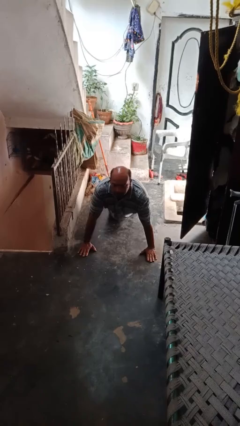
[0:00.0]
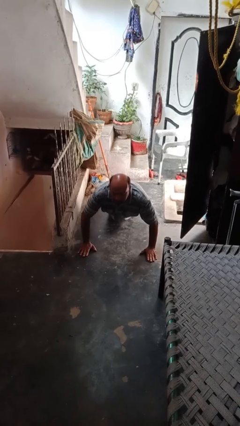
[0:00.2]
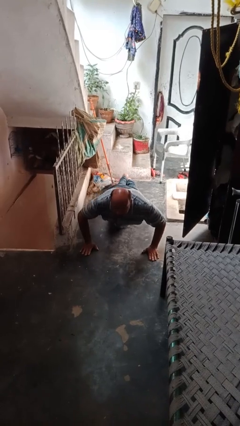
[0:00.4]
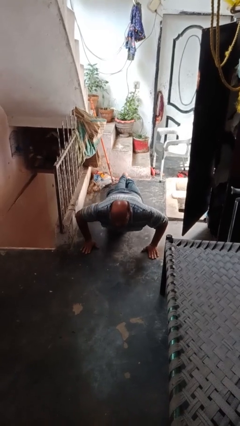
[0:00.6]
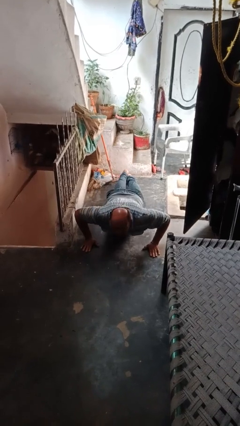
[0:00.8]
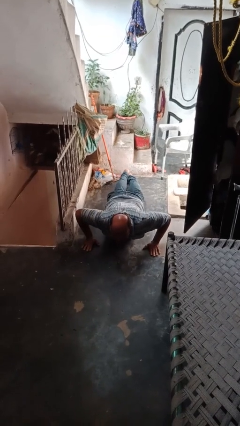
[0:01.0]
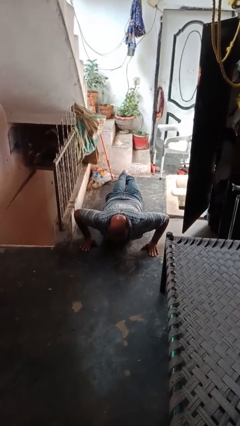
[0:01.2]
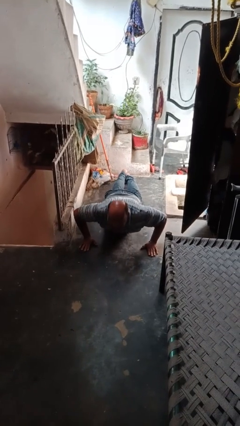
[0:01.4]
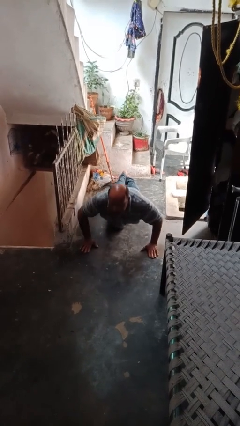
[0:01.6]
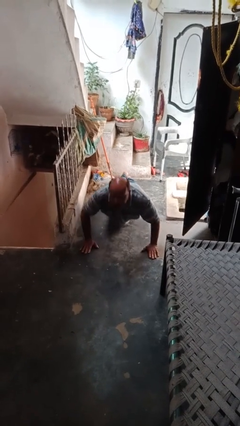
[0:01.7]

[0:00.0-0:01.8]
person exercises with pushup

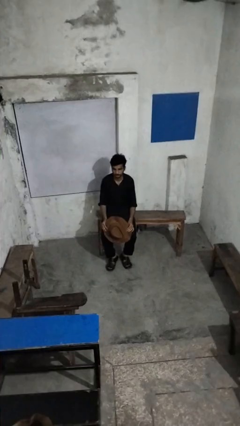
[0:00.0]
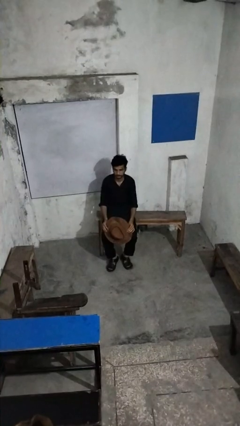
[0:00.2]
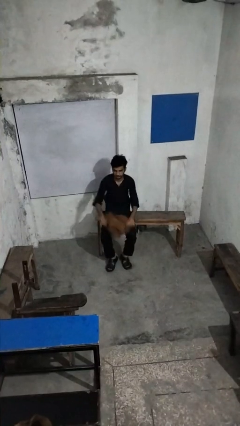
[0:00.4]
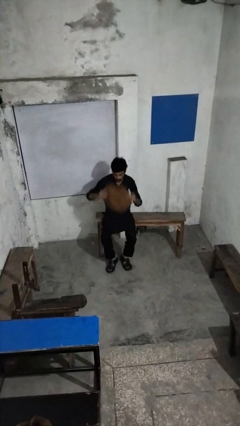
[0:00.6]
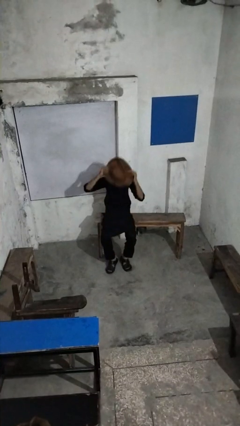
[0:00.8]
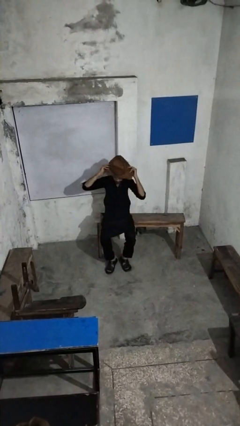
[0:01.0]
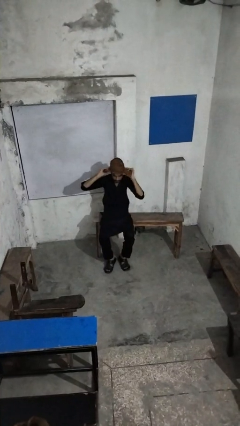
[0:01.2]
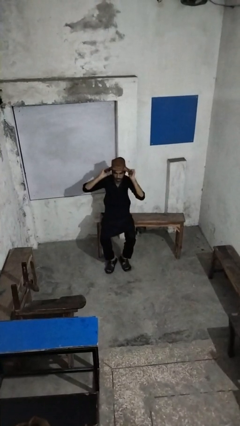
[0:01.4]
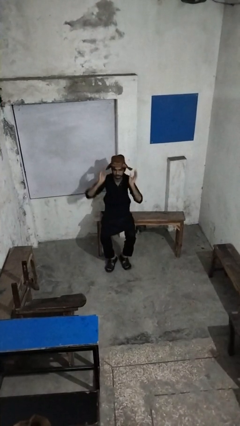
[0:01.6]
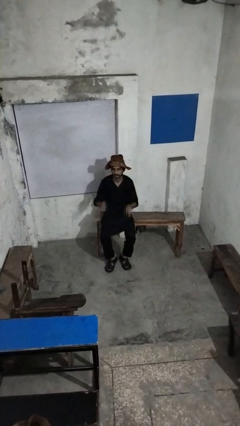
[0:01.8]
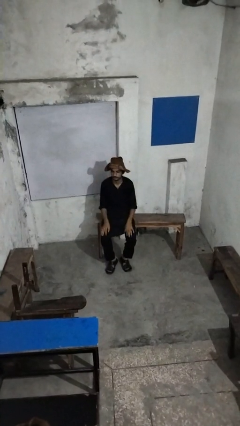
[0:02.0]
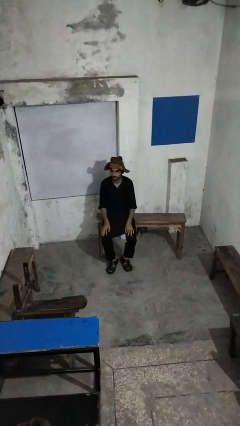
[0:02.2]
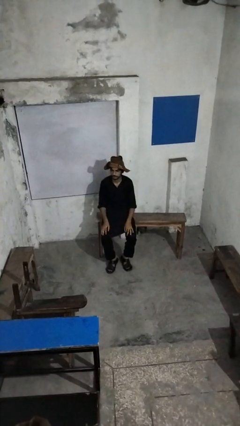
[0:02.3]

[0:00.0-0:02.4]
person puts on hat

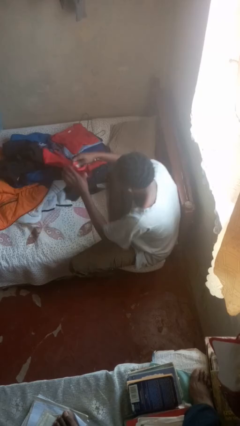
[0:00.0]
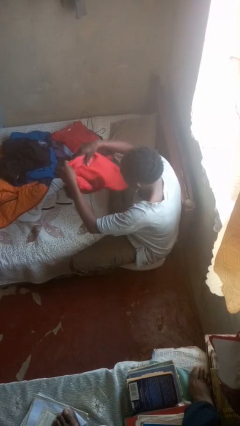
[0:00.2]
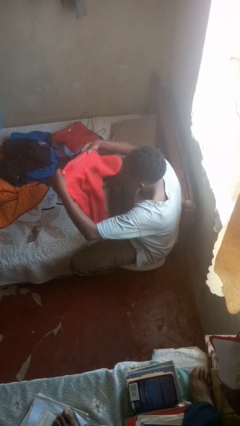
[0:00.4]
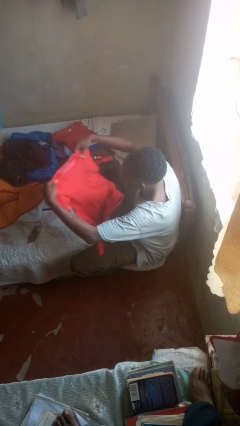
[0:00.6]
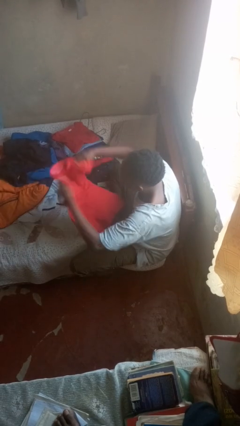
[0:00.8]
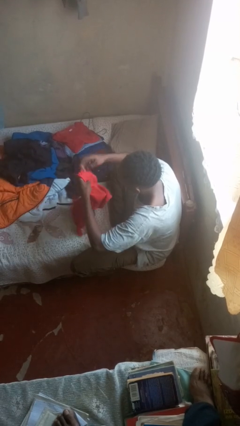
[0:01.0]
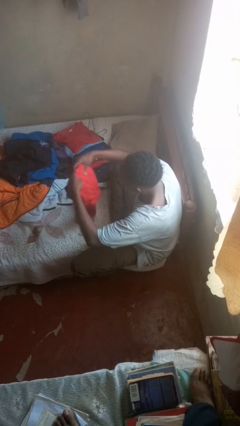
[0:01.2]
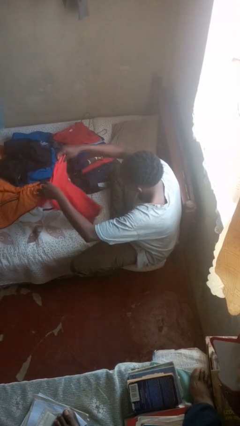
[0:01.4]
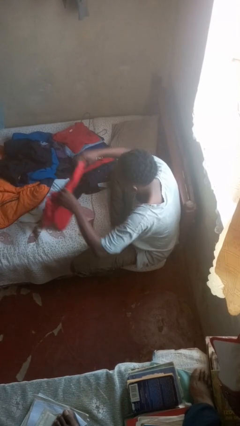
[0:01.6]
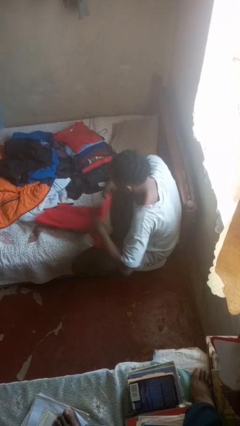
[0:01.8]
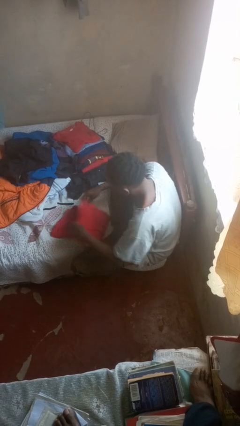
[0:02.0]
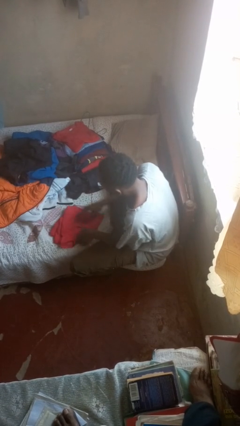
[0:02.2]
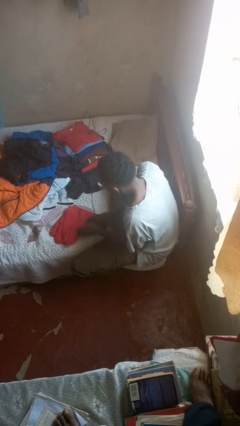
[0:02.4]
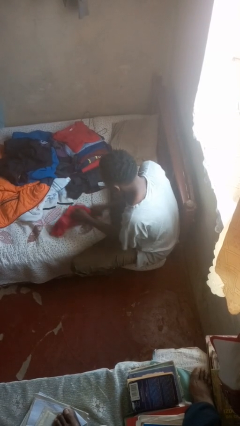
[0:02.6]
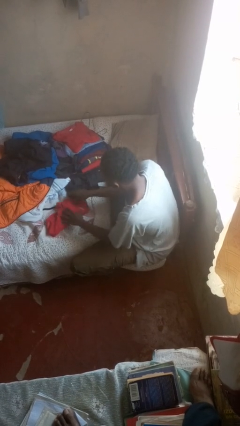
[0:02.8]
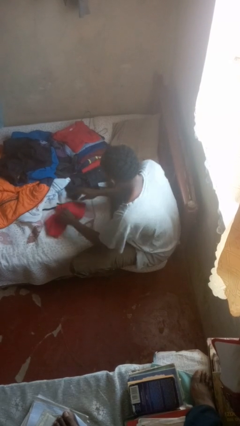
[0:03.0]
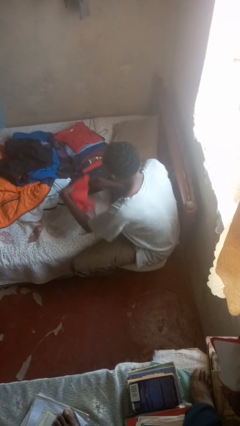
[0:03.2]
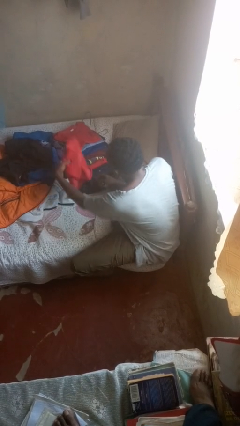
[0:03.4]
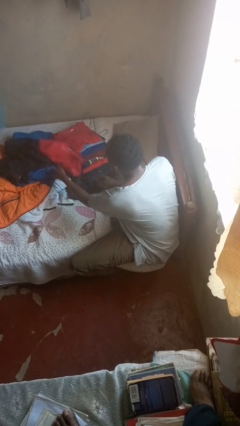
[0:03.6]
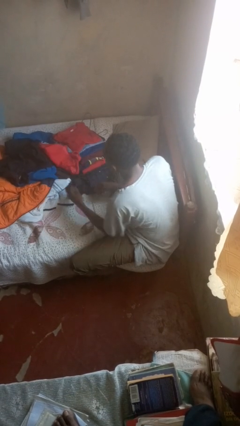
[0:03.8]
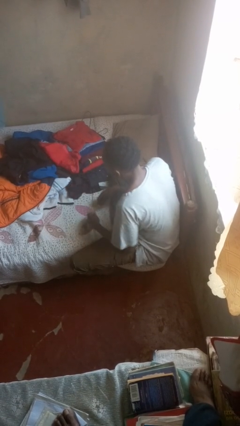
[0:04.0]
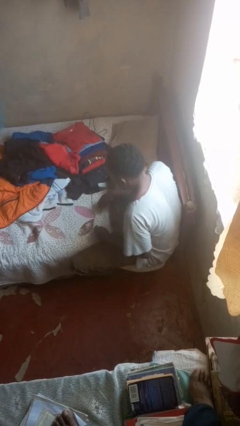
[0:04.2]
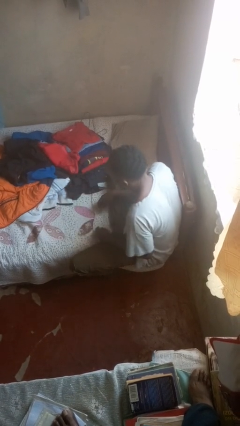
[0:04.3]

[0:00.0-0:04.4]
person folds shirt

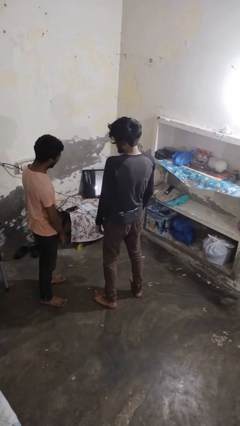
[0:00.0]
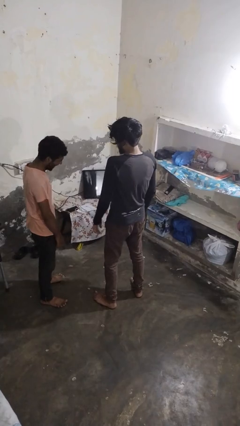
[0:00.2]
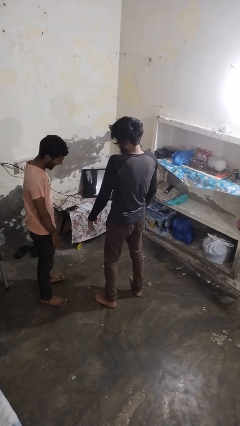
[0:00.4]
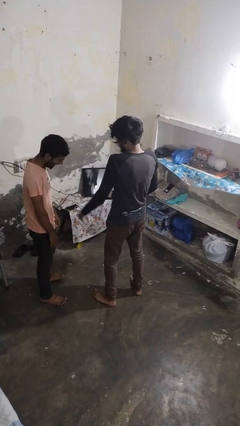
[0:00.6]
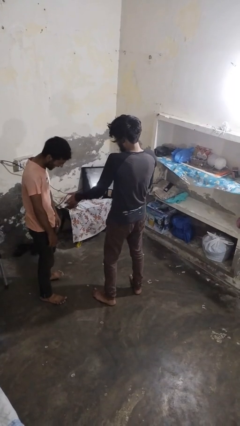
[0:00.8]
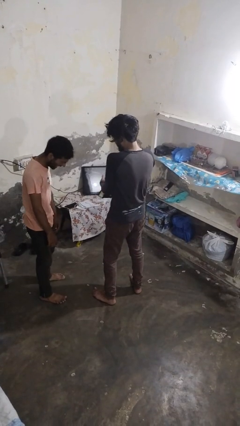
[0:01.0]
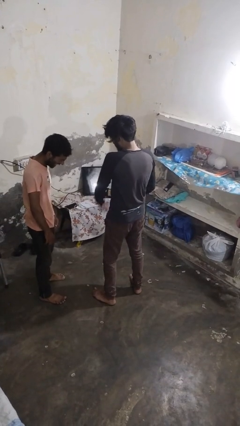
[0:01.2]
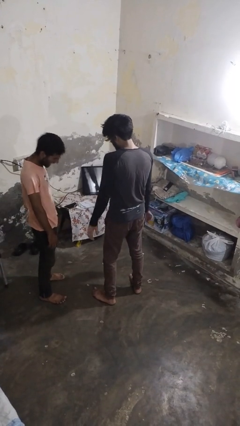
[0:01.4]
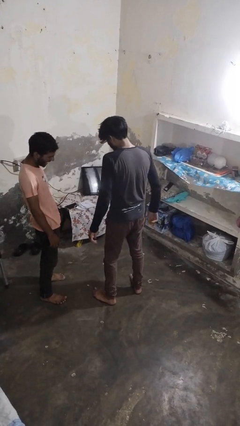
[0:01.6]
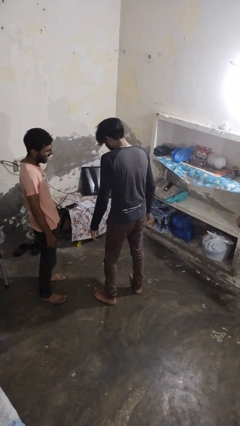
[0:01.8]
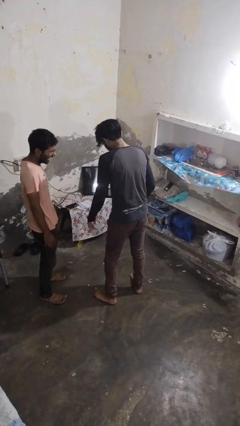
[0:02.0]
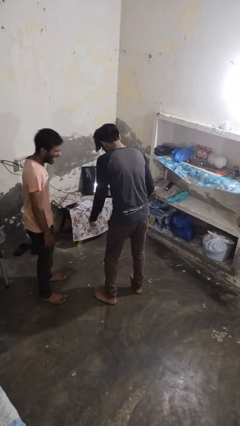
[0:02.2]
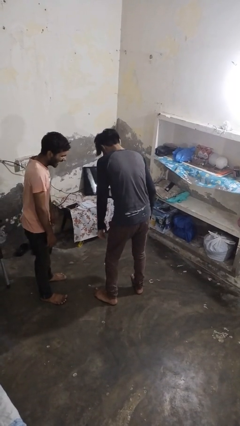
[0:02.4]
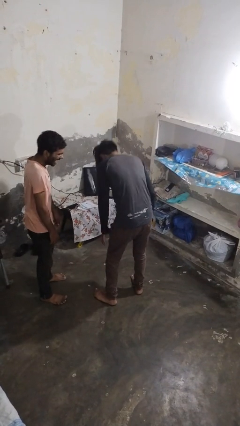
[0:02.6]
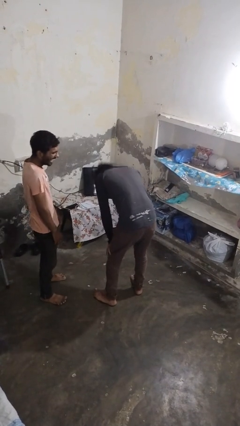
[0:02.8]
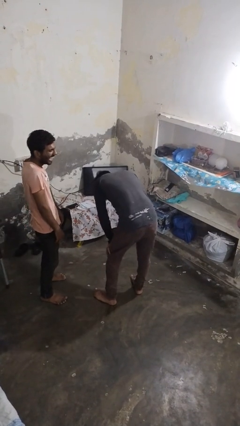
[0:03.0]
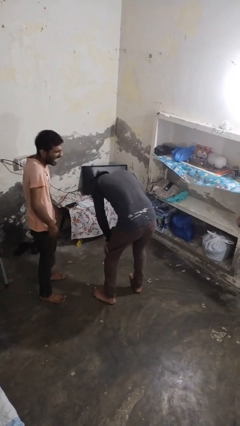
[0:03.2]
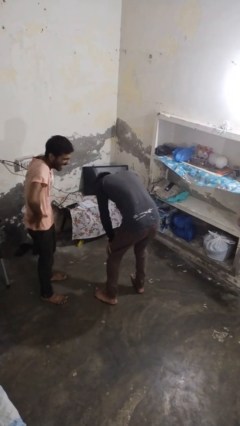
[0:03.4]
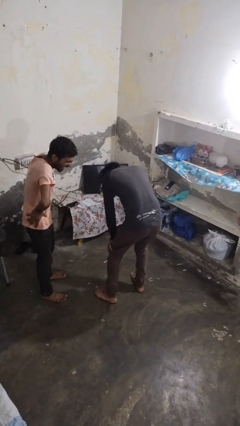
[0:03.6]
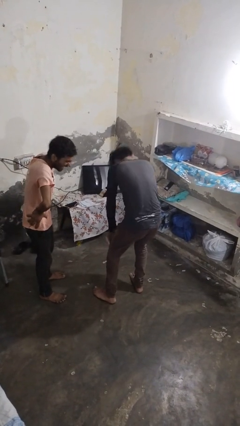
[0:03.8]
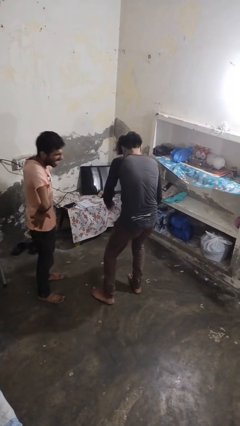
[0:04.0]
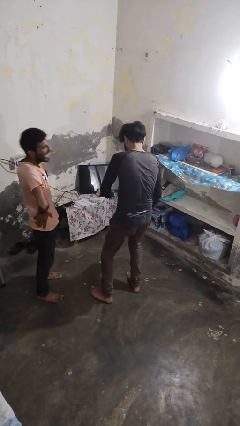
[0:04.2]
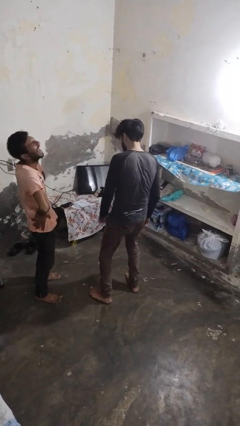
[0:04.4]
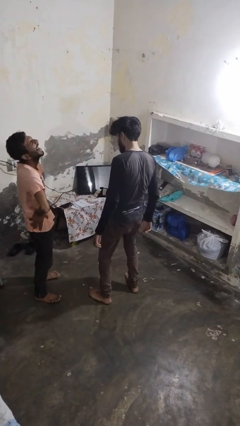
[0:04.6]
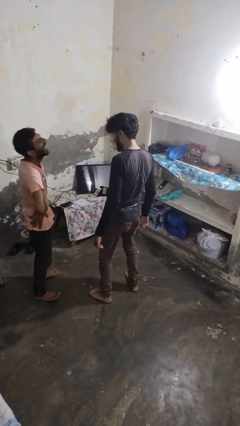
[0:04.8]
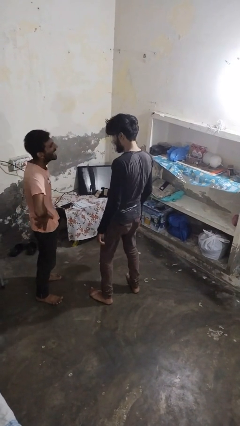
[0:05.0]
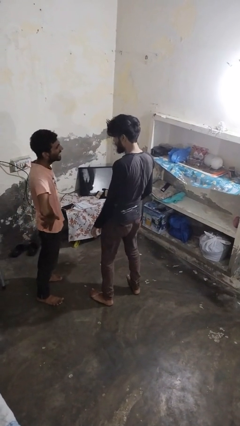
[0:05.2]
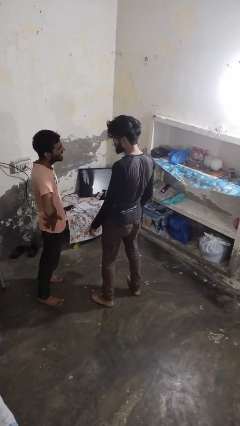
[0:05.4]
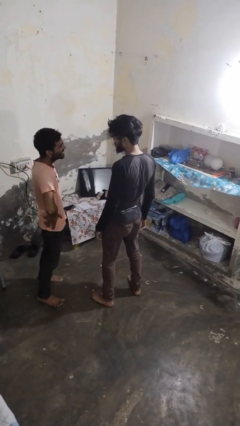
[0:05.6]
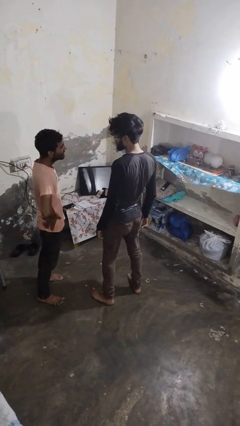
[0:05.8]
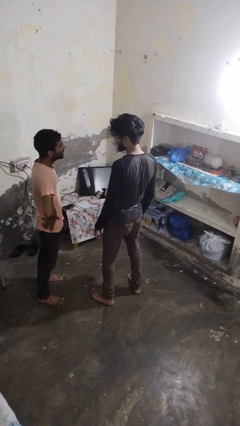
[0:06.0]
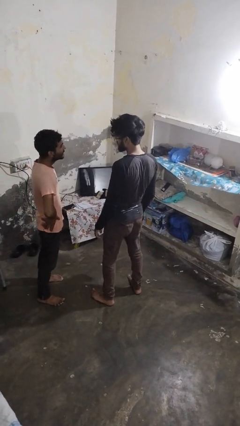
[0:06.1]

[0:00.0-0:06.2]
person laughs with person

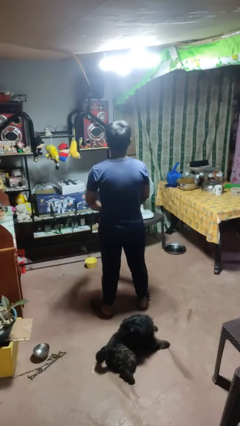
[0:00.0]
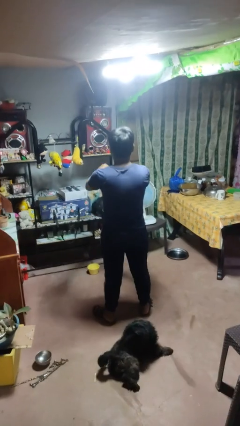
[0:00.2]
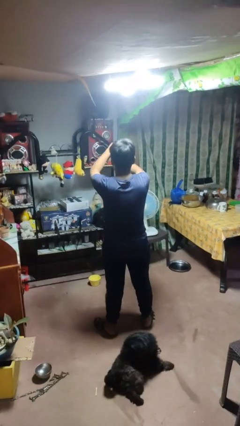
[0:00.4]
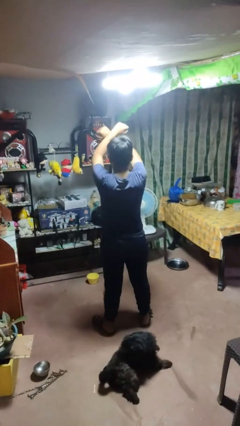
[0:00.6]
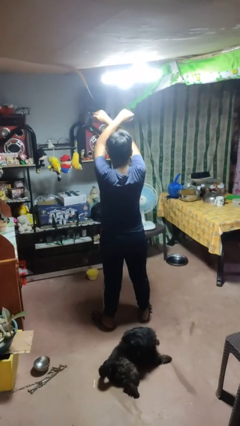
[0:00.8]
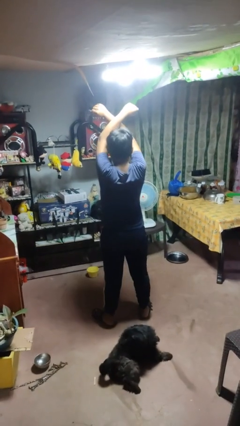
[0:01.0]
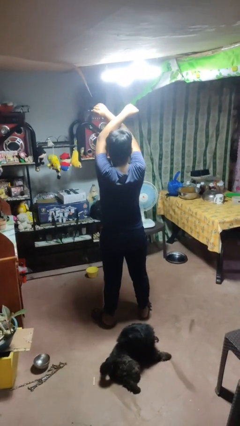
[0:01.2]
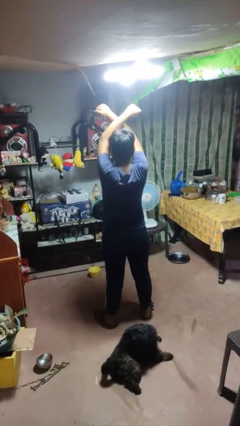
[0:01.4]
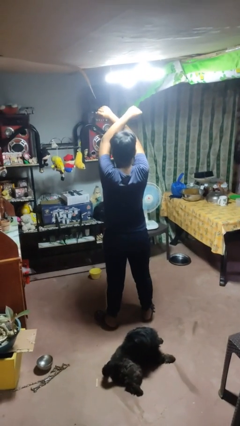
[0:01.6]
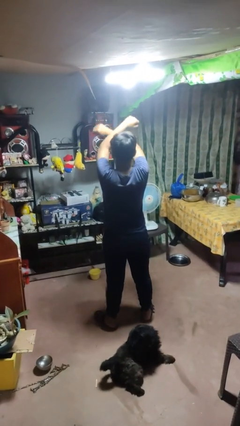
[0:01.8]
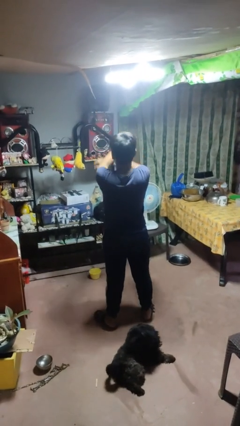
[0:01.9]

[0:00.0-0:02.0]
person gestures arms x

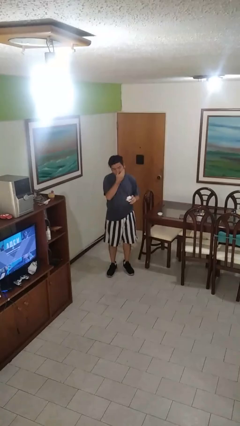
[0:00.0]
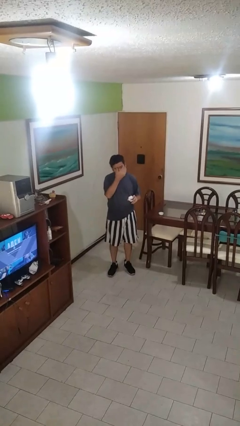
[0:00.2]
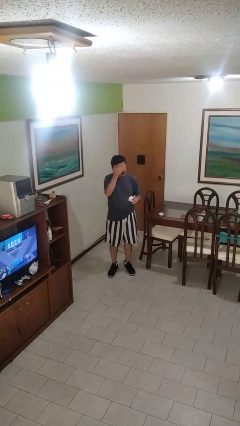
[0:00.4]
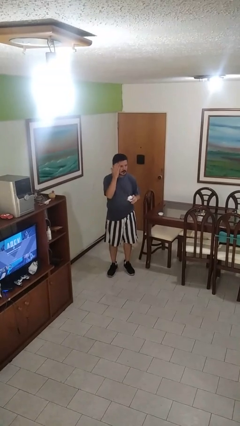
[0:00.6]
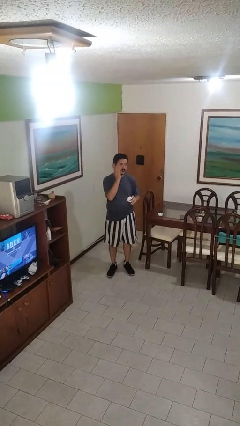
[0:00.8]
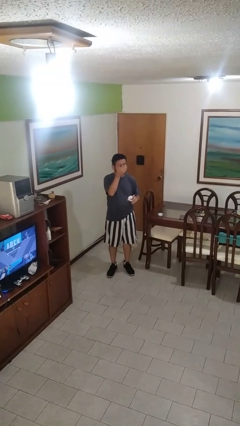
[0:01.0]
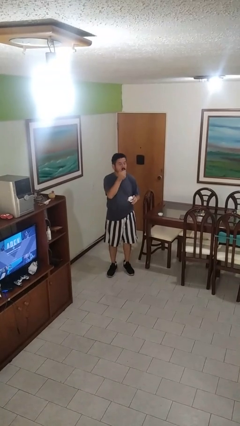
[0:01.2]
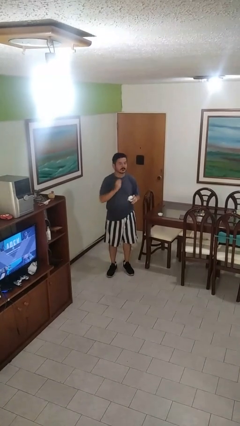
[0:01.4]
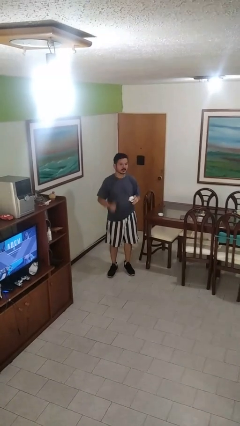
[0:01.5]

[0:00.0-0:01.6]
person applies facial moisturizer
